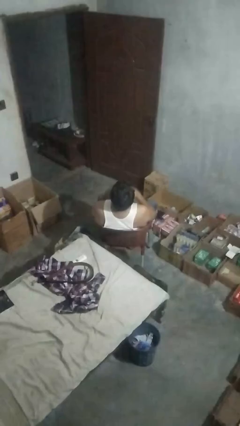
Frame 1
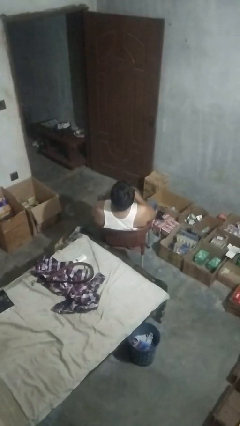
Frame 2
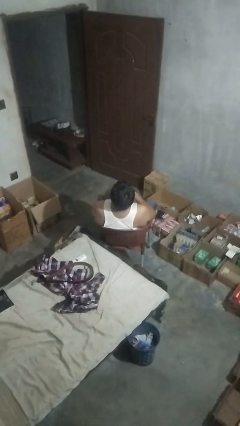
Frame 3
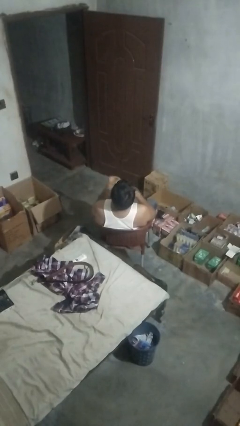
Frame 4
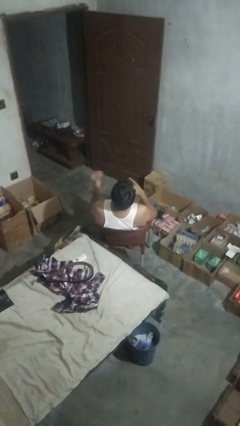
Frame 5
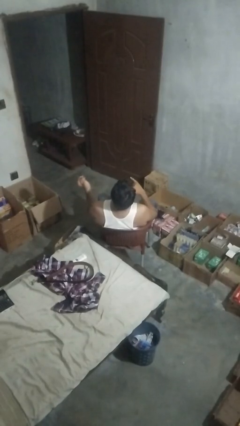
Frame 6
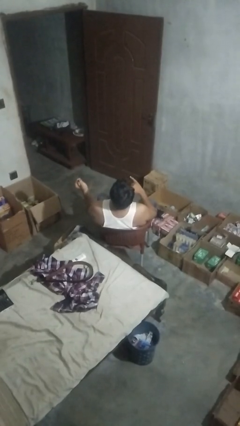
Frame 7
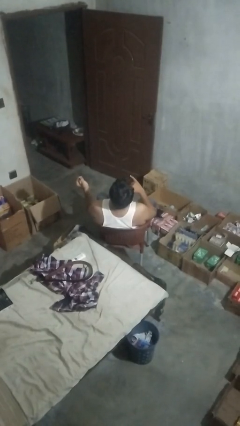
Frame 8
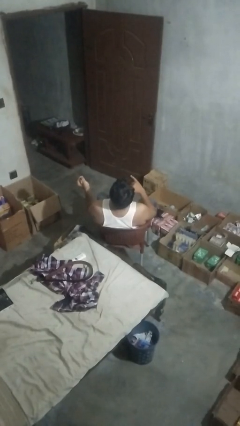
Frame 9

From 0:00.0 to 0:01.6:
person takes off ring

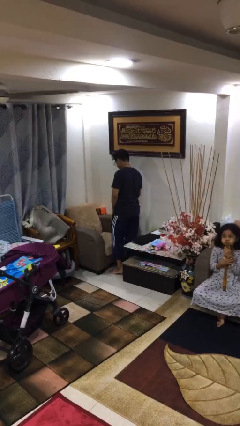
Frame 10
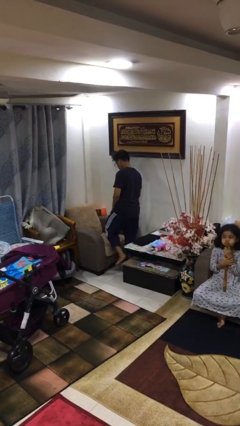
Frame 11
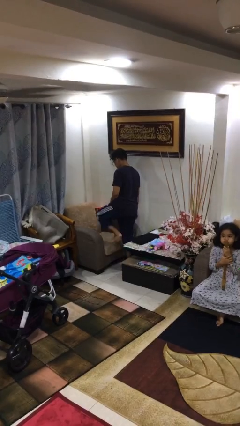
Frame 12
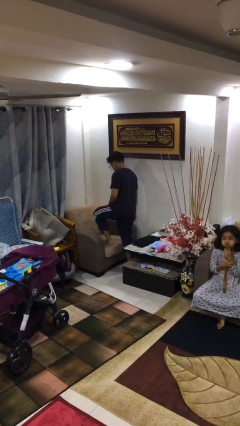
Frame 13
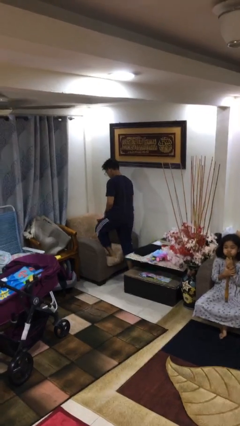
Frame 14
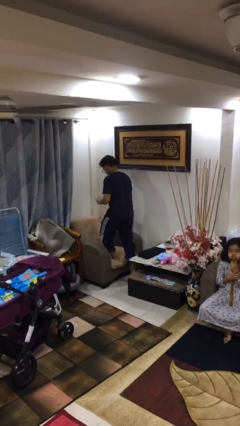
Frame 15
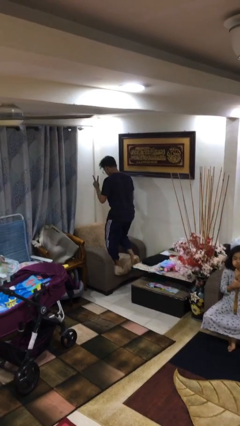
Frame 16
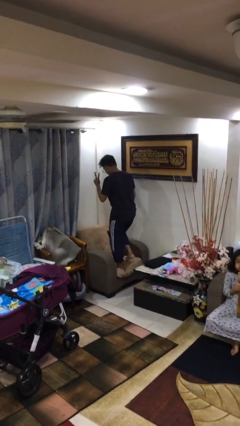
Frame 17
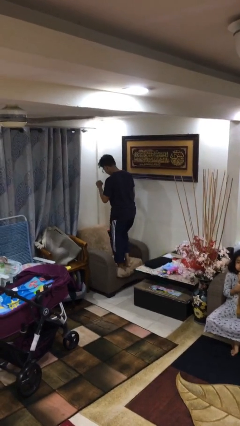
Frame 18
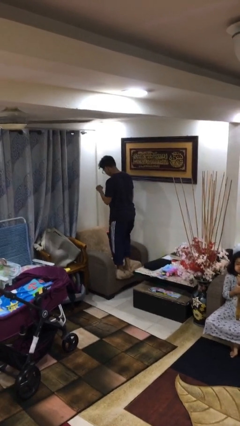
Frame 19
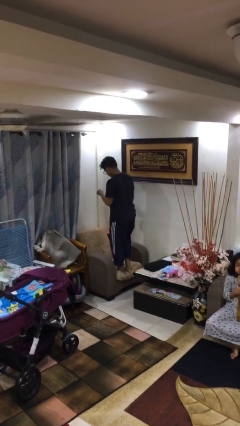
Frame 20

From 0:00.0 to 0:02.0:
person climbs on couch

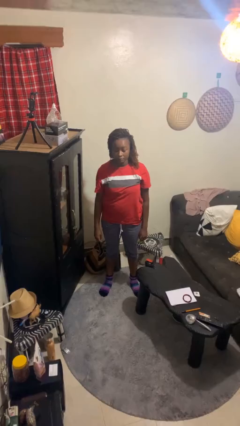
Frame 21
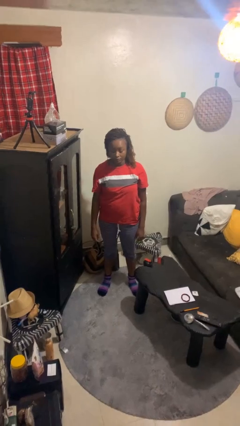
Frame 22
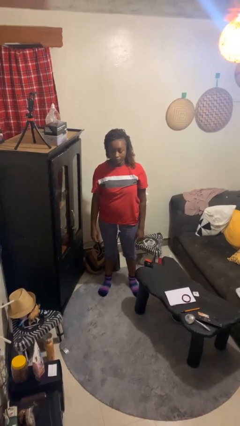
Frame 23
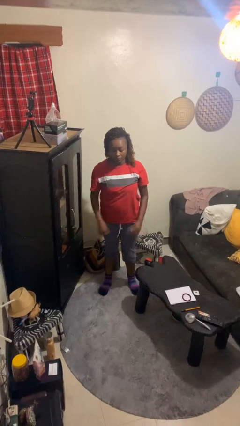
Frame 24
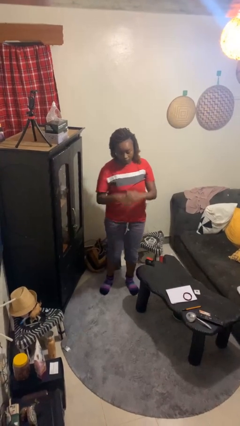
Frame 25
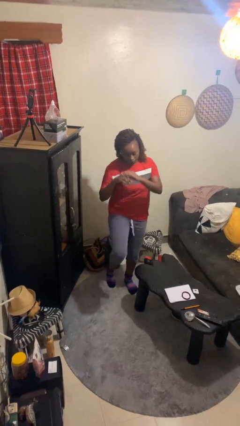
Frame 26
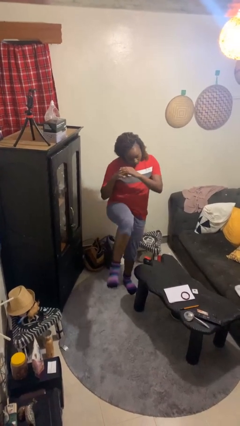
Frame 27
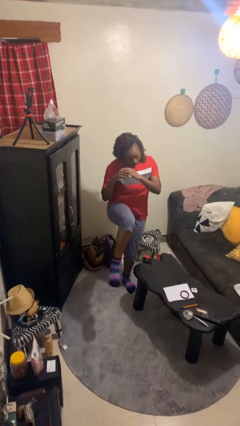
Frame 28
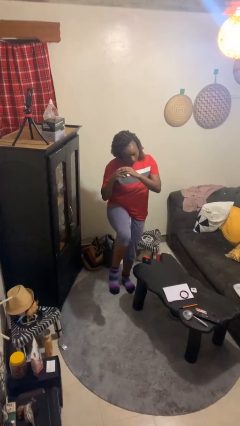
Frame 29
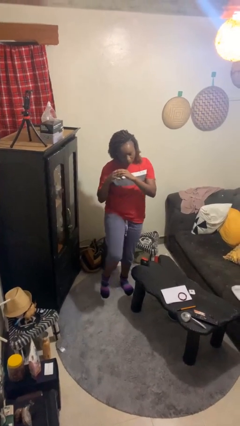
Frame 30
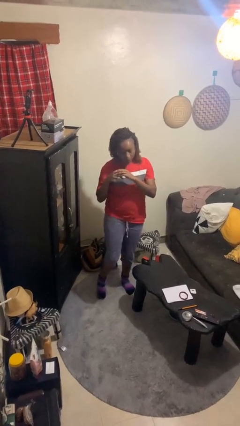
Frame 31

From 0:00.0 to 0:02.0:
person karate kicks

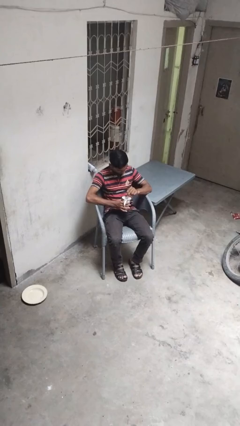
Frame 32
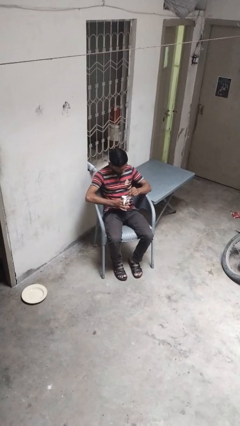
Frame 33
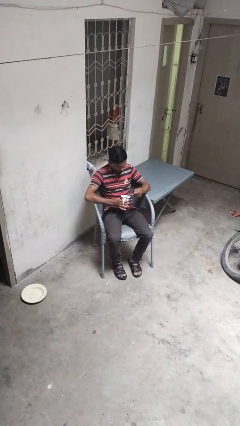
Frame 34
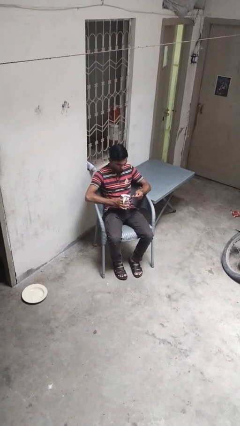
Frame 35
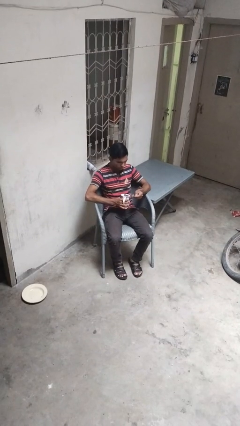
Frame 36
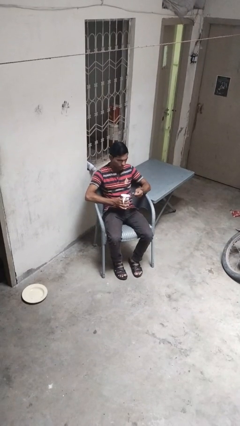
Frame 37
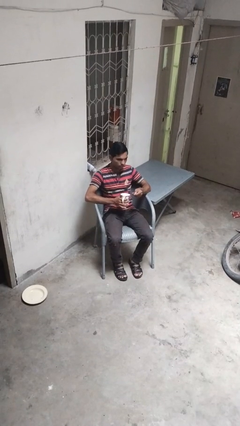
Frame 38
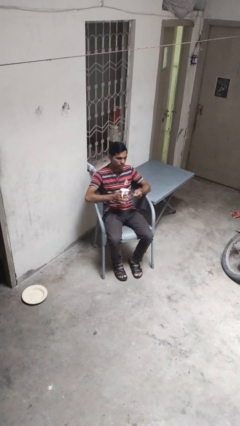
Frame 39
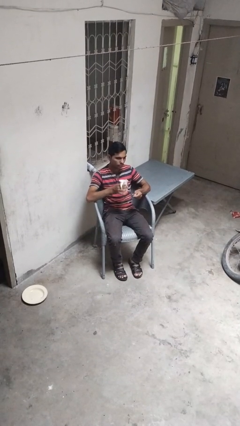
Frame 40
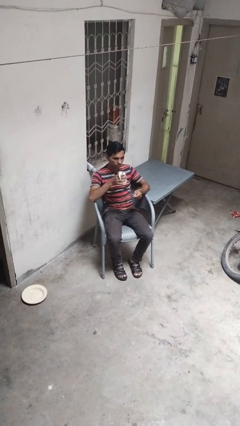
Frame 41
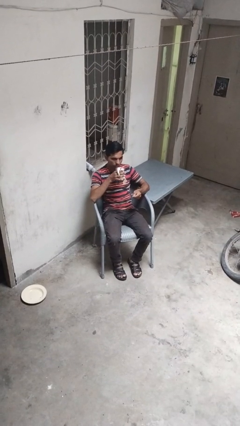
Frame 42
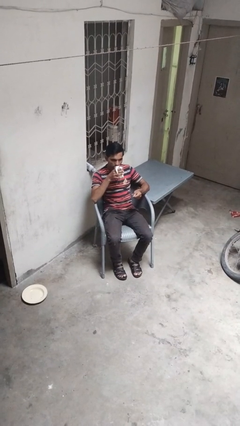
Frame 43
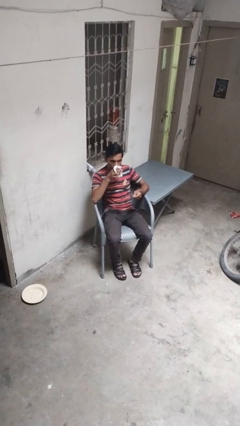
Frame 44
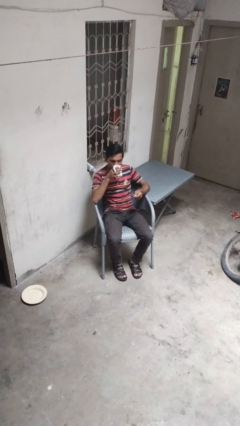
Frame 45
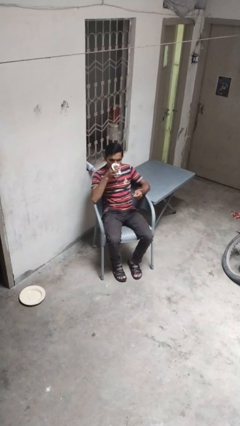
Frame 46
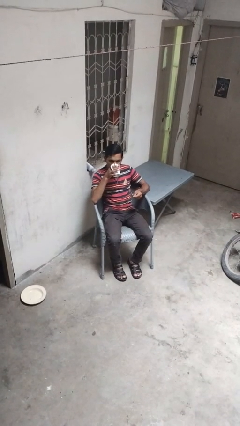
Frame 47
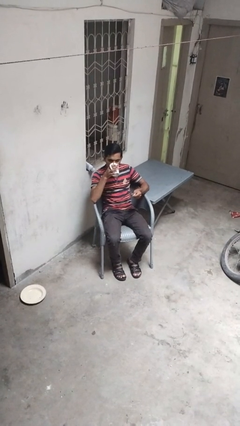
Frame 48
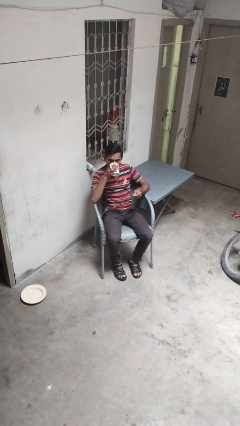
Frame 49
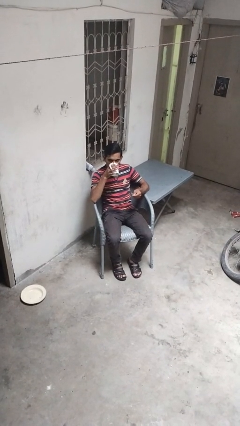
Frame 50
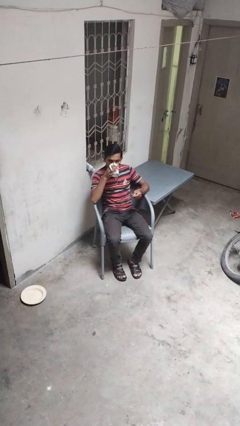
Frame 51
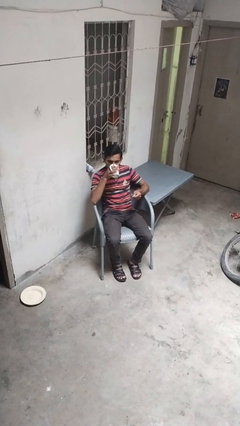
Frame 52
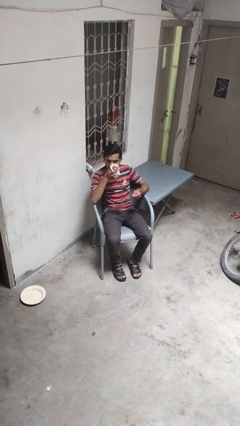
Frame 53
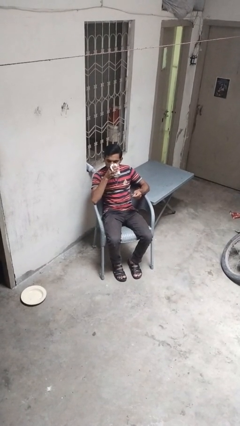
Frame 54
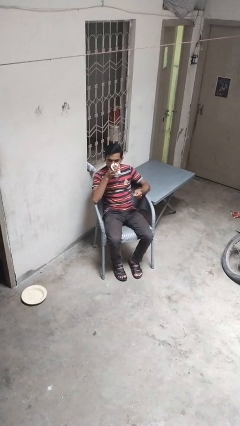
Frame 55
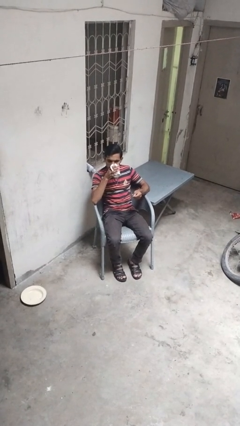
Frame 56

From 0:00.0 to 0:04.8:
person drinks from mug

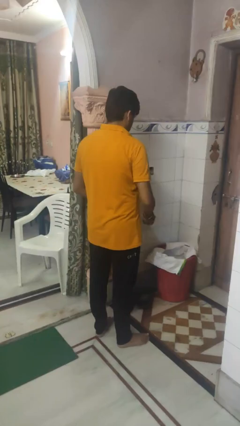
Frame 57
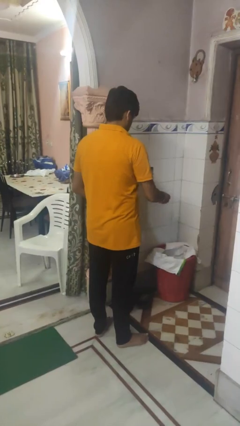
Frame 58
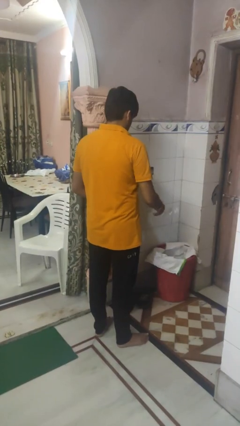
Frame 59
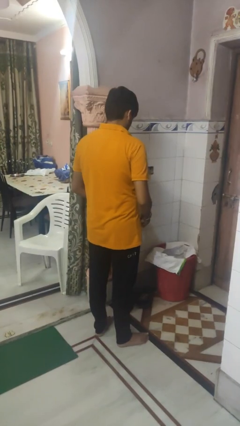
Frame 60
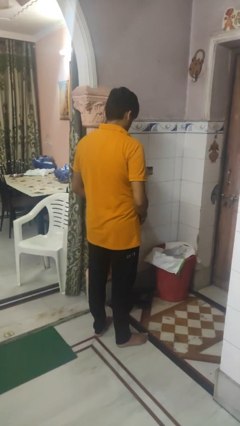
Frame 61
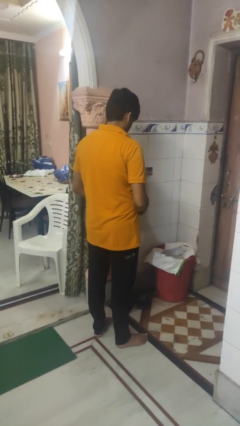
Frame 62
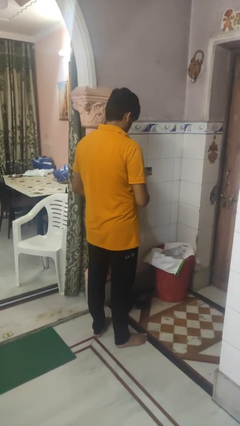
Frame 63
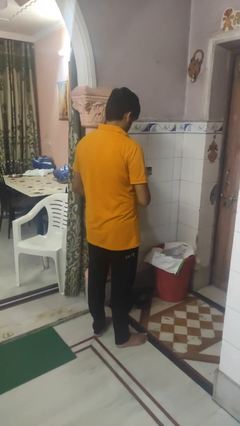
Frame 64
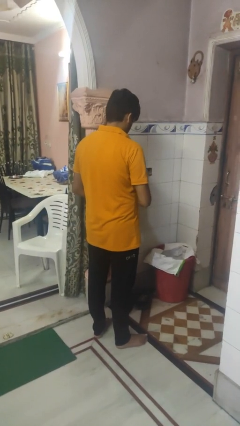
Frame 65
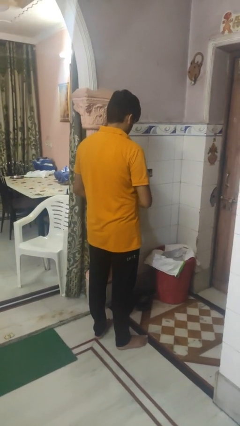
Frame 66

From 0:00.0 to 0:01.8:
person discards trash

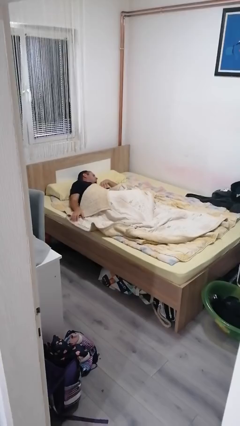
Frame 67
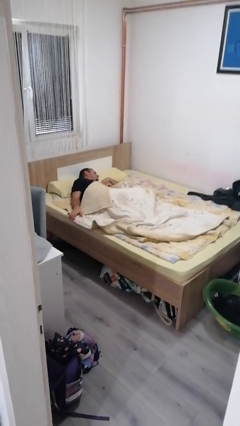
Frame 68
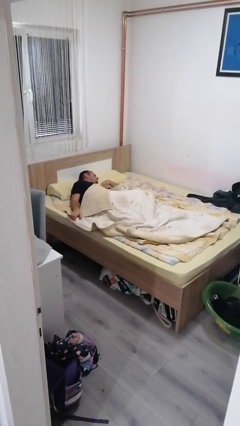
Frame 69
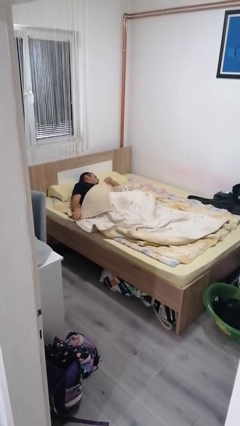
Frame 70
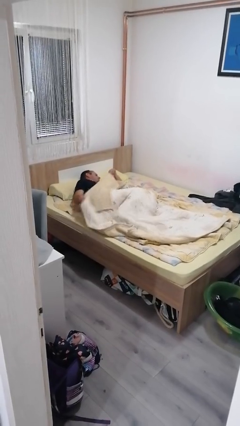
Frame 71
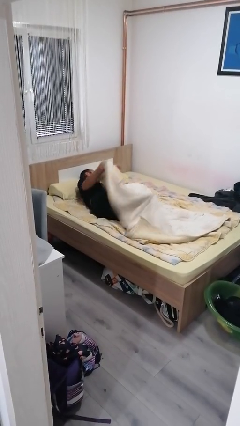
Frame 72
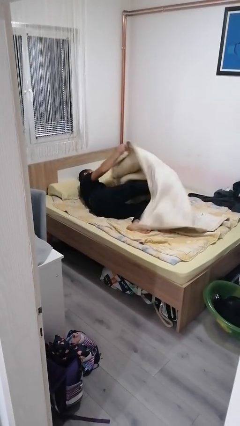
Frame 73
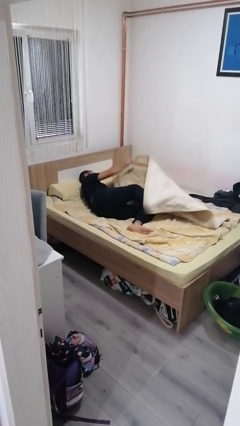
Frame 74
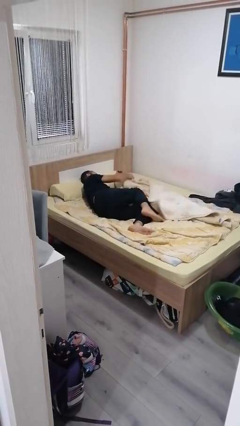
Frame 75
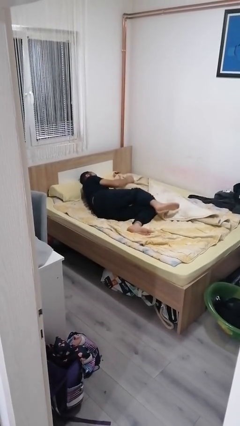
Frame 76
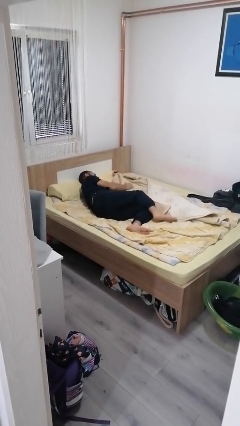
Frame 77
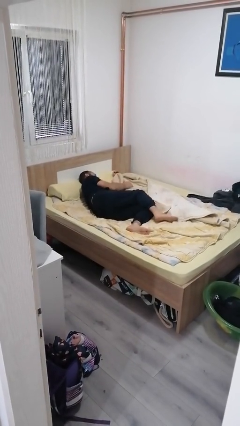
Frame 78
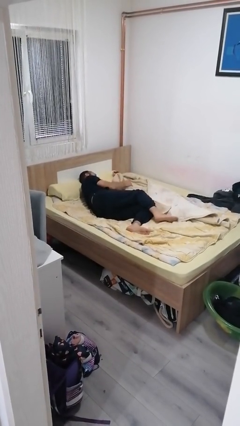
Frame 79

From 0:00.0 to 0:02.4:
person uncovers with bedsheets

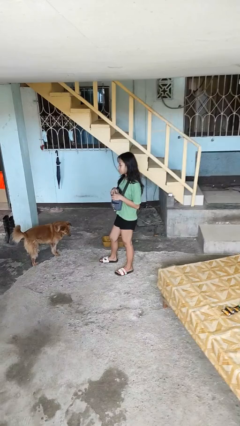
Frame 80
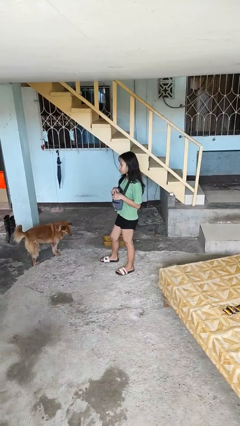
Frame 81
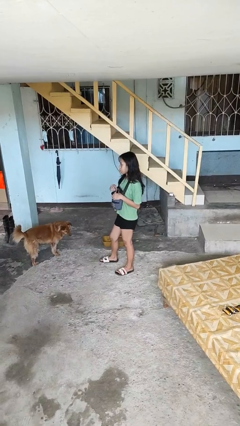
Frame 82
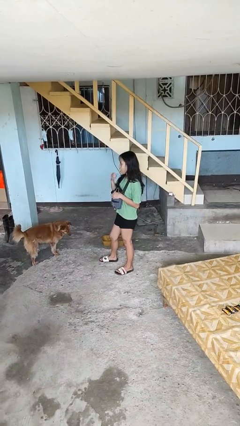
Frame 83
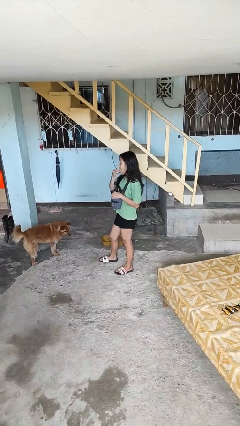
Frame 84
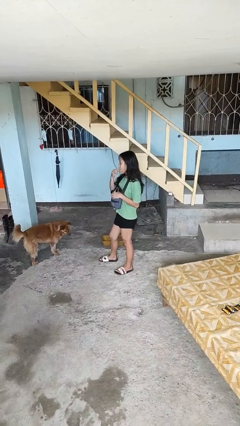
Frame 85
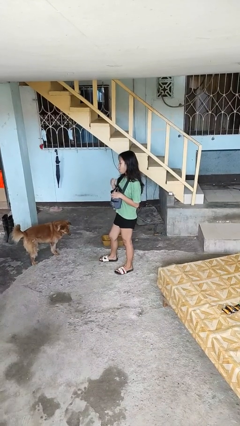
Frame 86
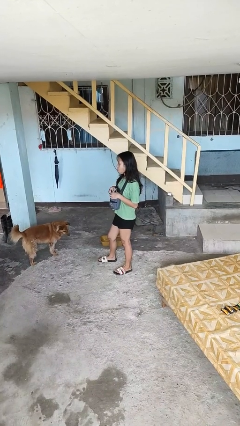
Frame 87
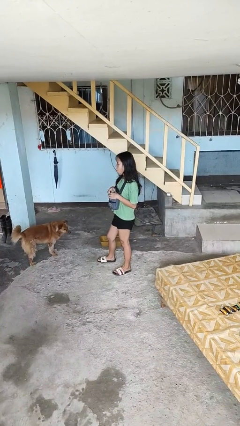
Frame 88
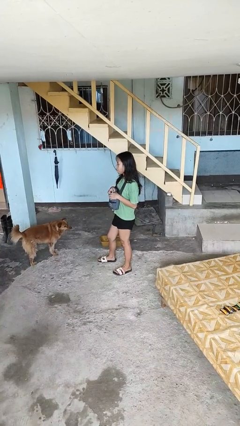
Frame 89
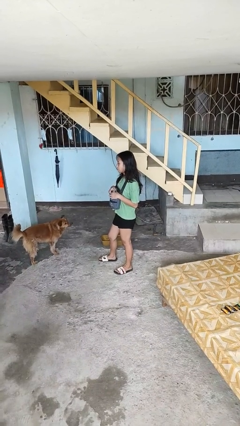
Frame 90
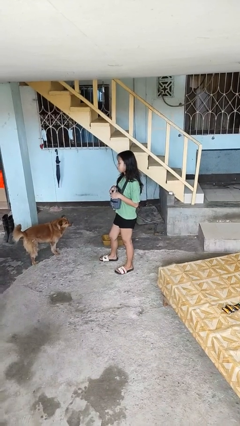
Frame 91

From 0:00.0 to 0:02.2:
person eats snack from bag
